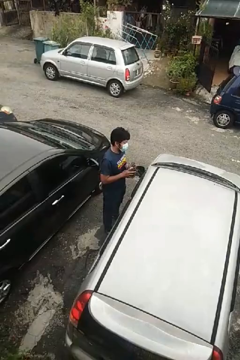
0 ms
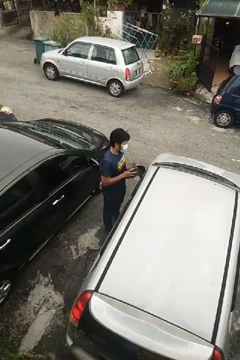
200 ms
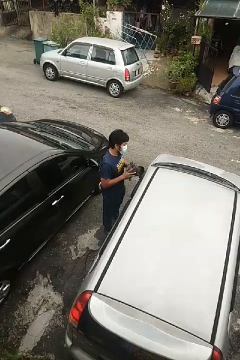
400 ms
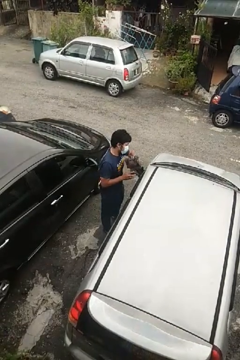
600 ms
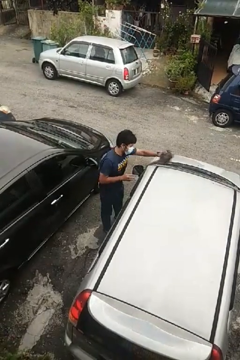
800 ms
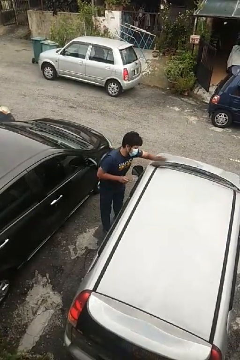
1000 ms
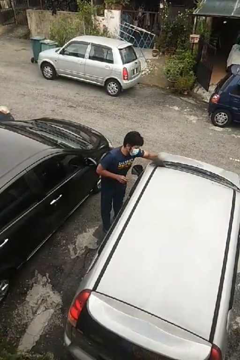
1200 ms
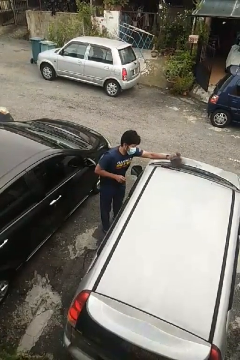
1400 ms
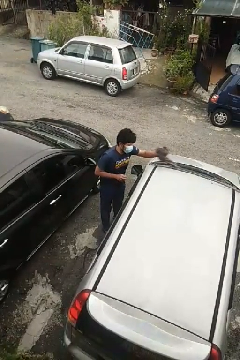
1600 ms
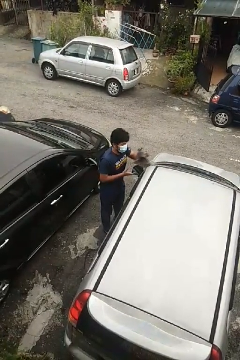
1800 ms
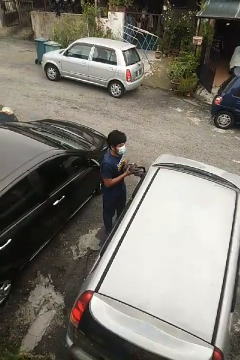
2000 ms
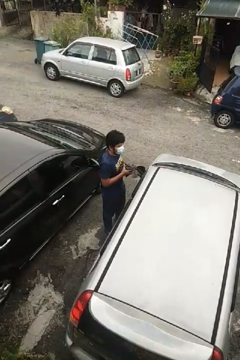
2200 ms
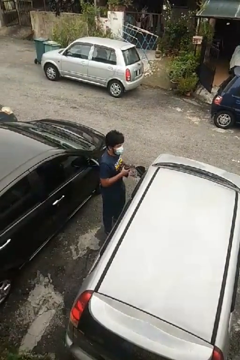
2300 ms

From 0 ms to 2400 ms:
person polishes car with rag

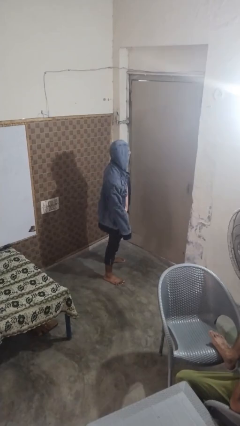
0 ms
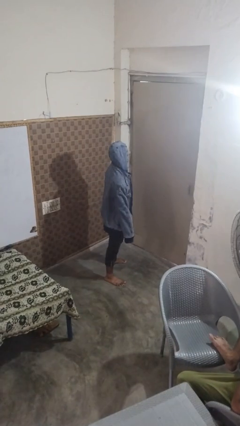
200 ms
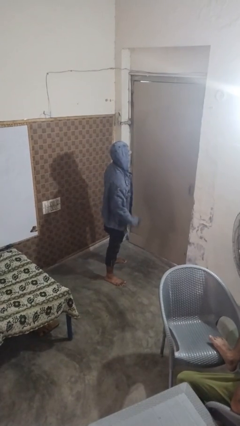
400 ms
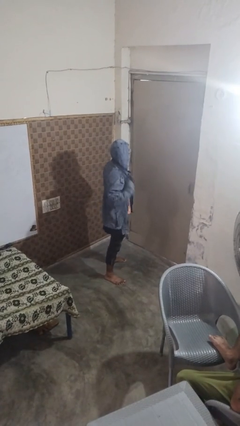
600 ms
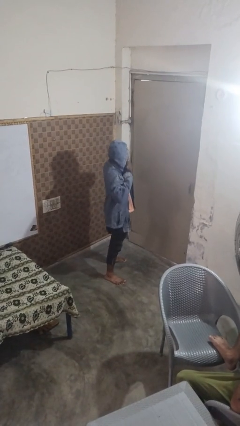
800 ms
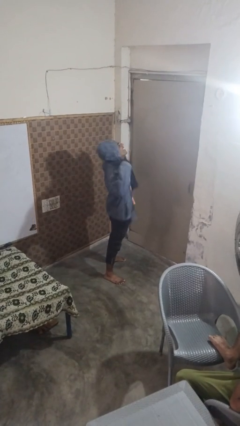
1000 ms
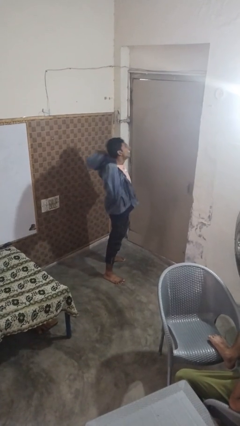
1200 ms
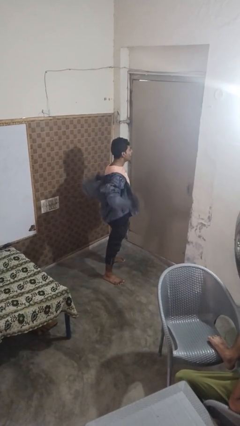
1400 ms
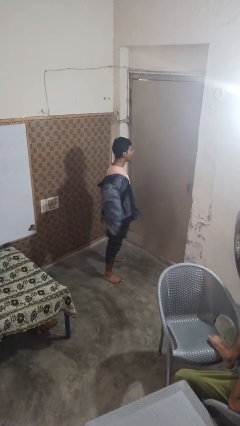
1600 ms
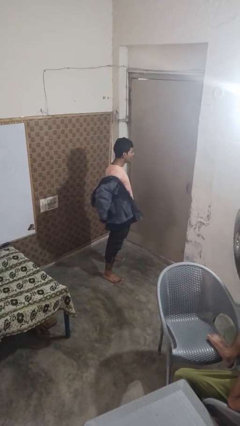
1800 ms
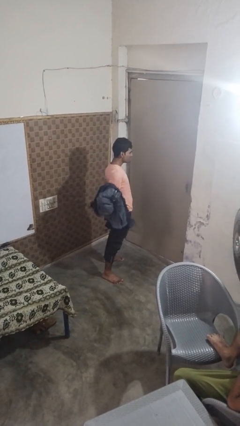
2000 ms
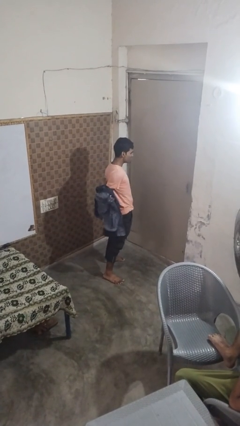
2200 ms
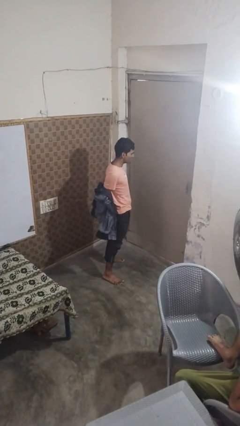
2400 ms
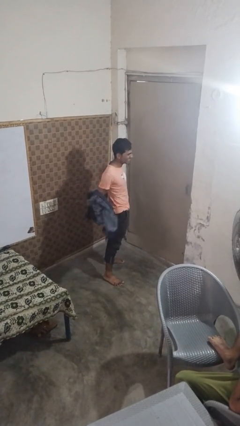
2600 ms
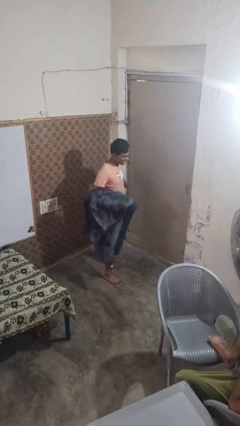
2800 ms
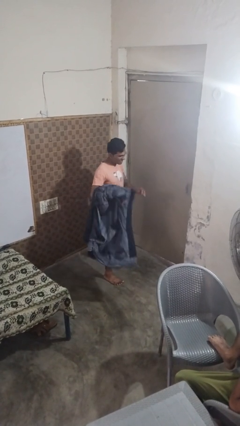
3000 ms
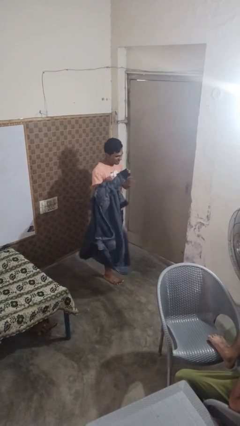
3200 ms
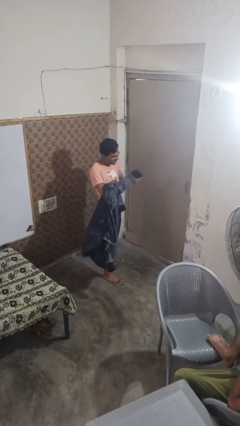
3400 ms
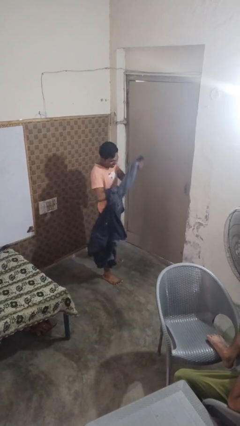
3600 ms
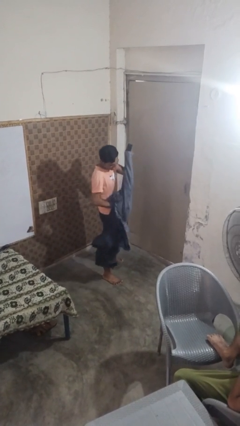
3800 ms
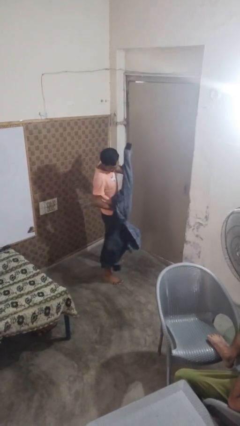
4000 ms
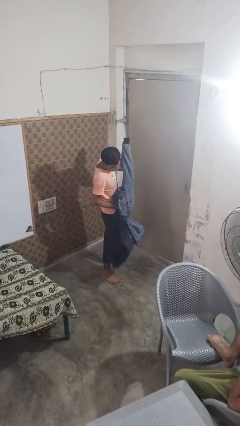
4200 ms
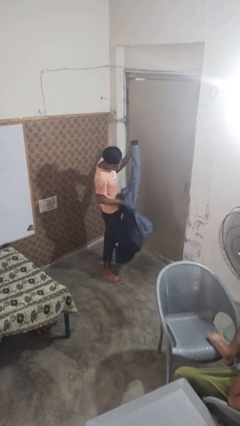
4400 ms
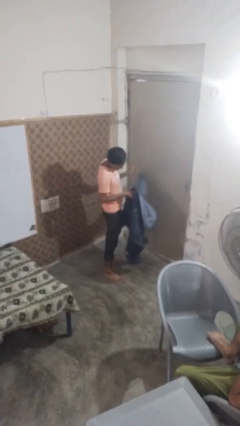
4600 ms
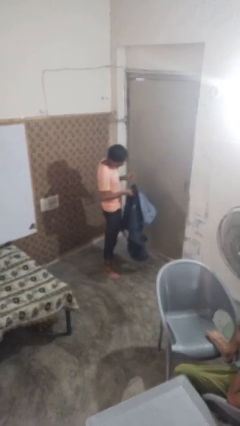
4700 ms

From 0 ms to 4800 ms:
person takes off hoodie

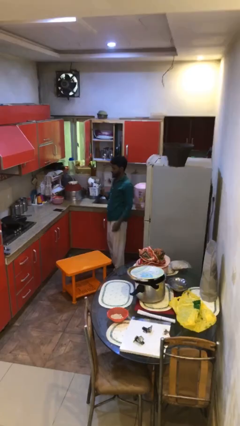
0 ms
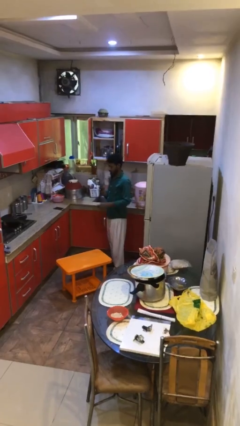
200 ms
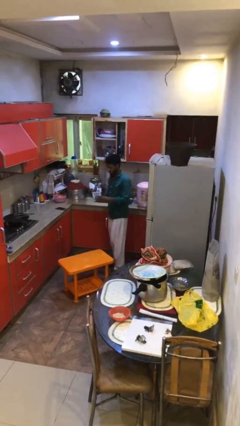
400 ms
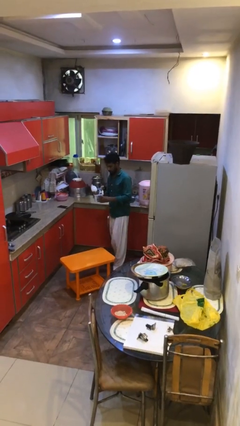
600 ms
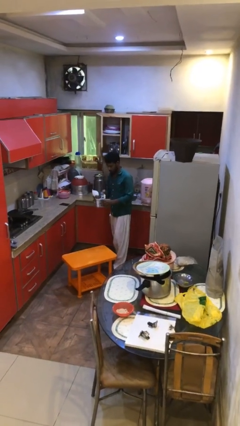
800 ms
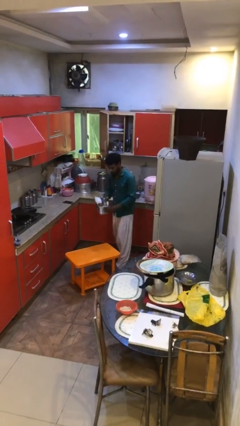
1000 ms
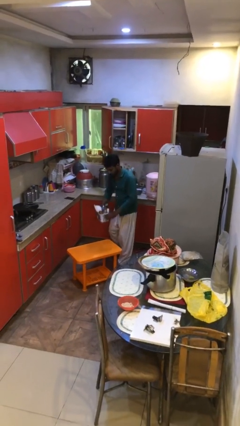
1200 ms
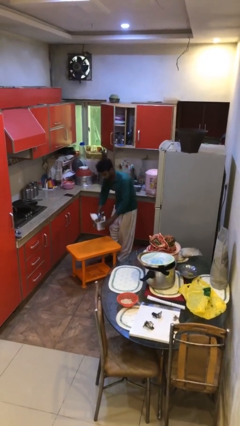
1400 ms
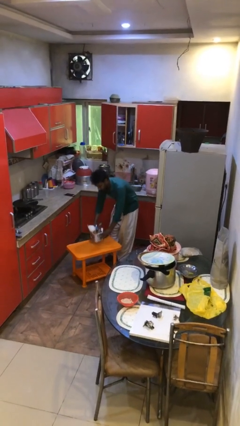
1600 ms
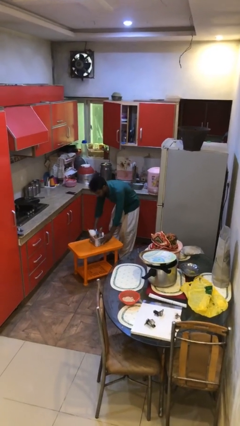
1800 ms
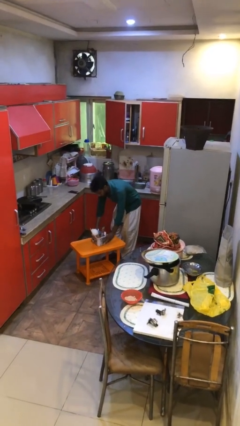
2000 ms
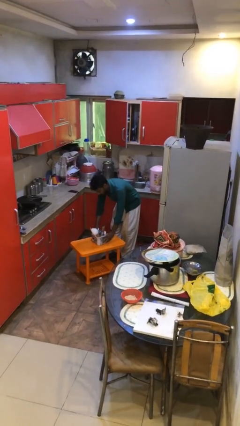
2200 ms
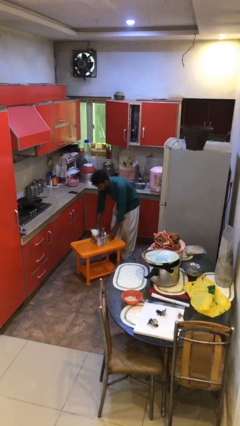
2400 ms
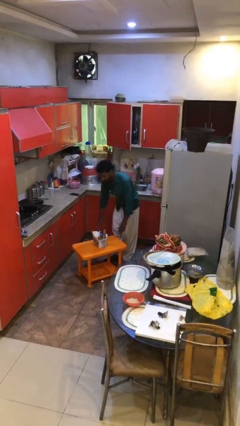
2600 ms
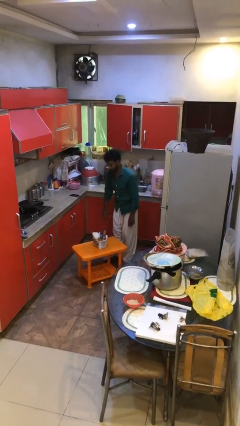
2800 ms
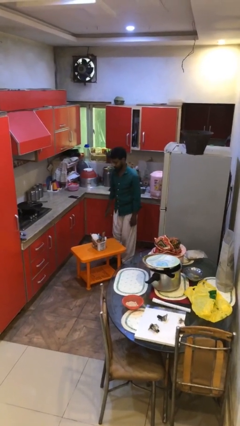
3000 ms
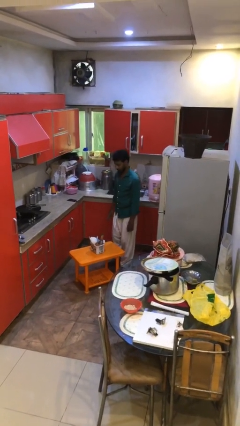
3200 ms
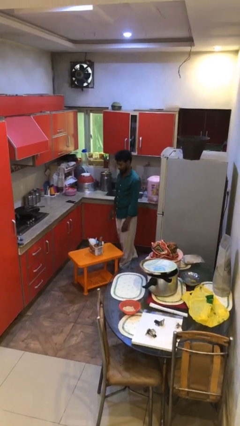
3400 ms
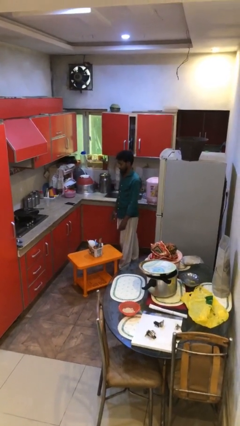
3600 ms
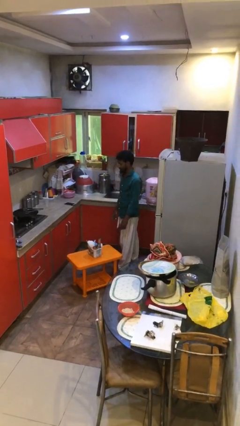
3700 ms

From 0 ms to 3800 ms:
person puts down object on table

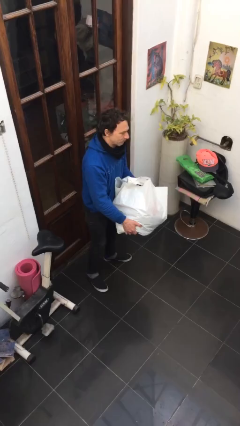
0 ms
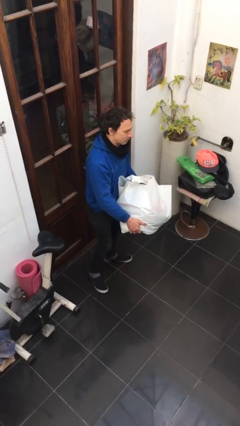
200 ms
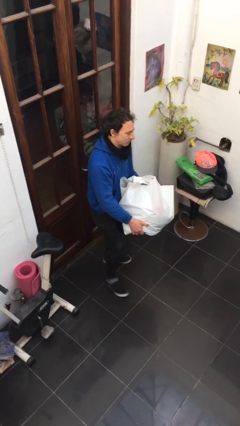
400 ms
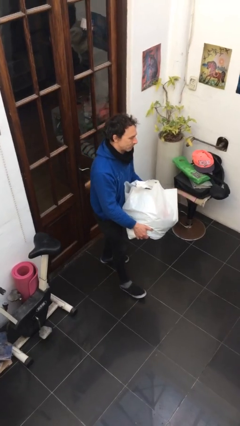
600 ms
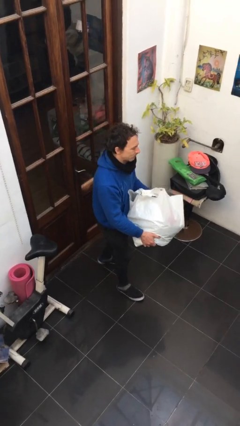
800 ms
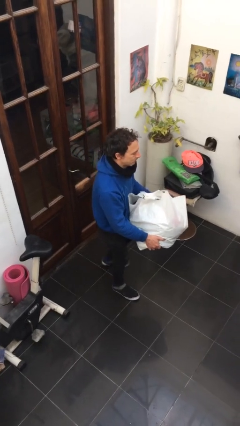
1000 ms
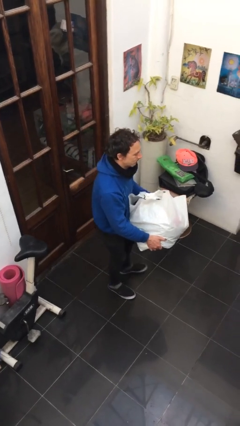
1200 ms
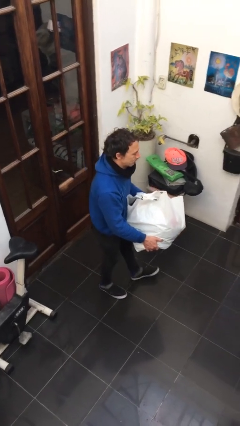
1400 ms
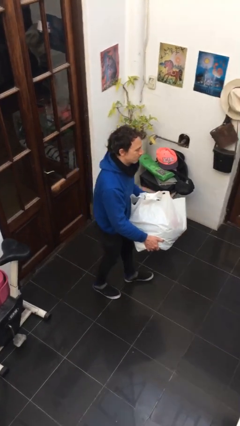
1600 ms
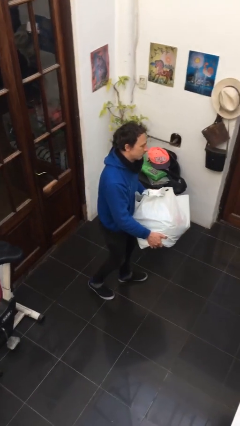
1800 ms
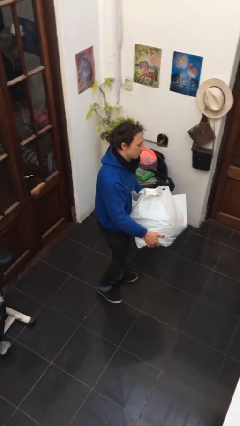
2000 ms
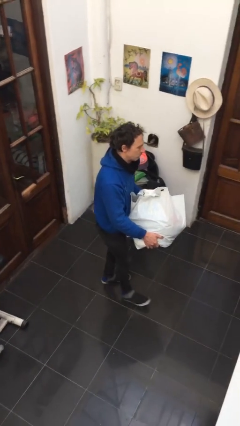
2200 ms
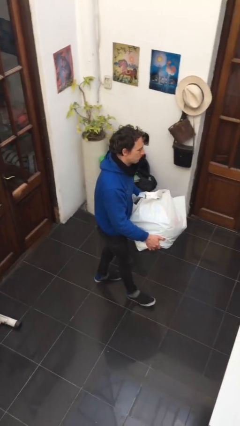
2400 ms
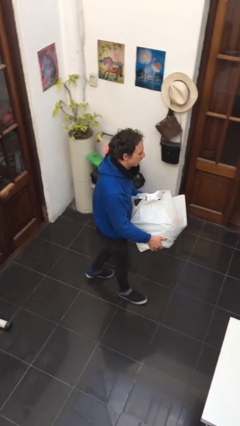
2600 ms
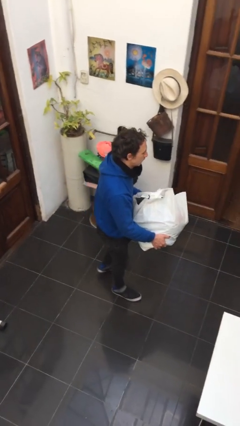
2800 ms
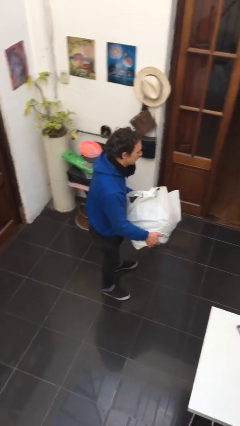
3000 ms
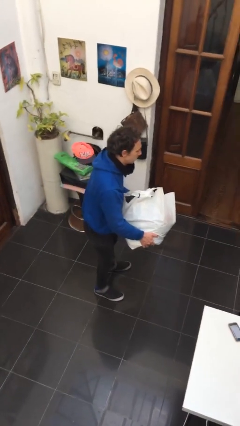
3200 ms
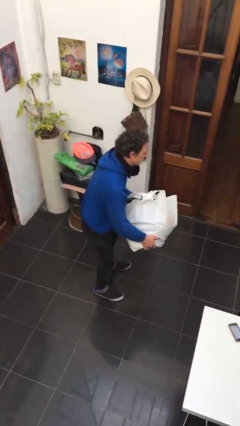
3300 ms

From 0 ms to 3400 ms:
person carries heavy object

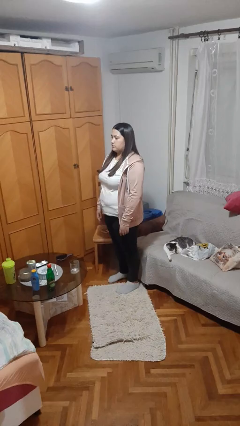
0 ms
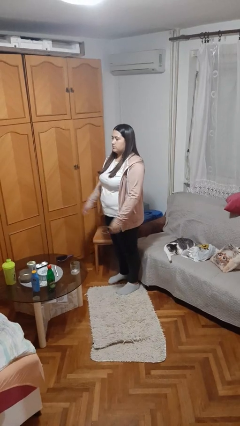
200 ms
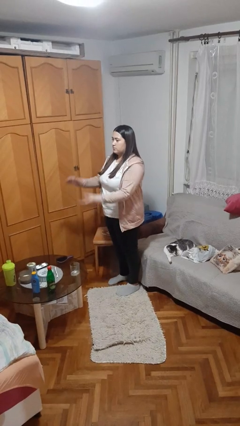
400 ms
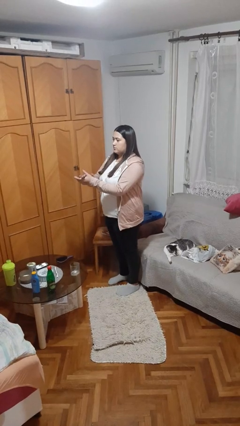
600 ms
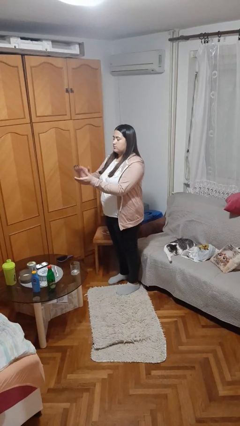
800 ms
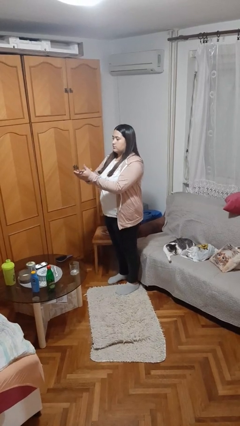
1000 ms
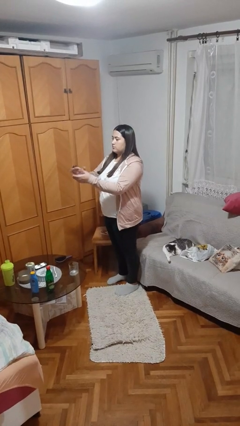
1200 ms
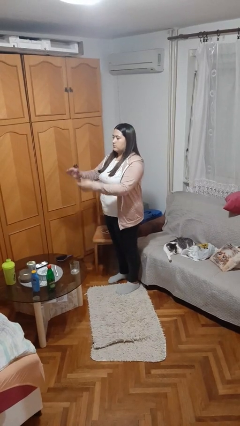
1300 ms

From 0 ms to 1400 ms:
person claps hands

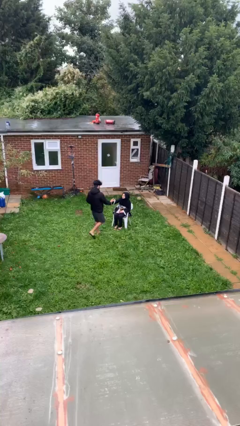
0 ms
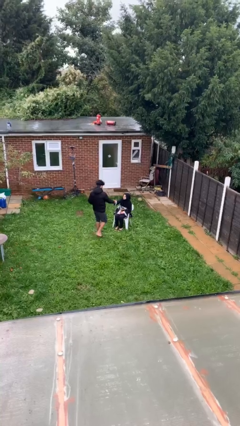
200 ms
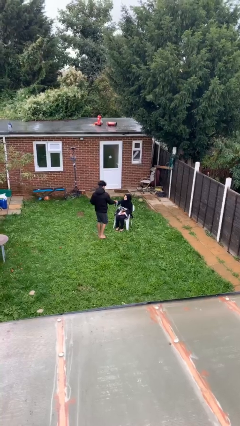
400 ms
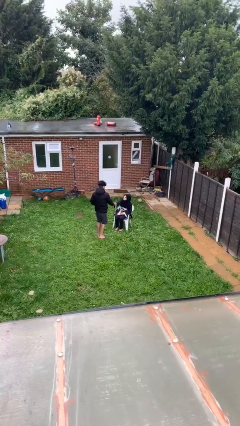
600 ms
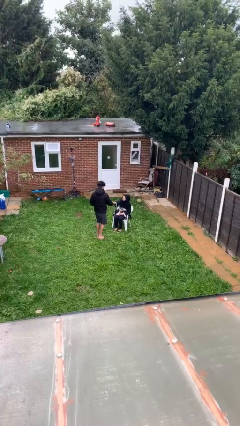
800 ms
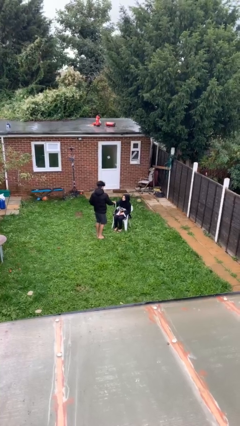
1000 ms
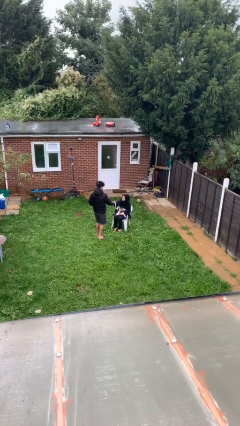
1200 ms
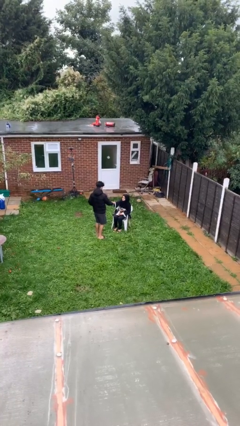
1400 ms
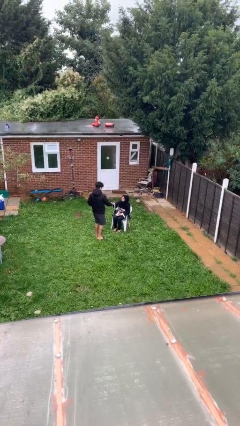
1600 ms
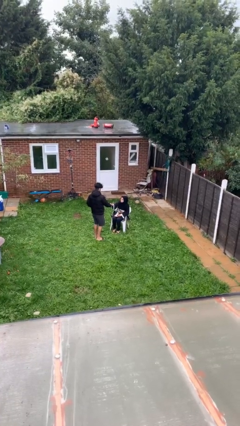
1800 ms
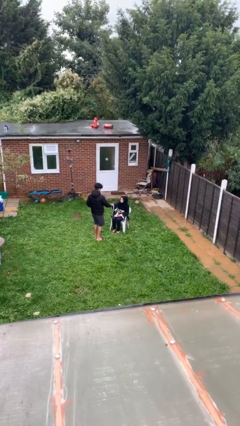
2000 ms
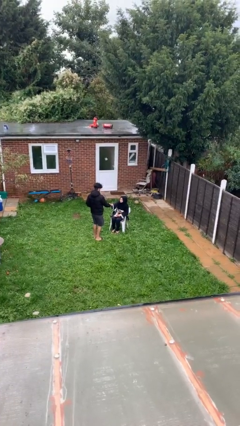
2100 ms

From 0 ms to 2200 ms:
person shakes hand
